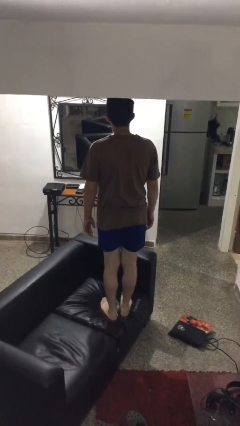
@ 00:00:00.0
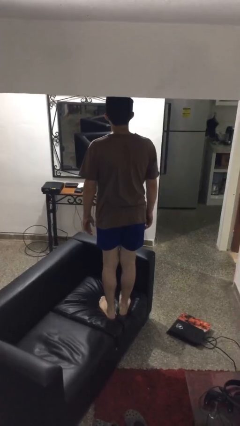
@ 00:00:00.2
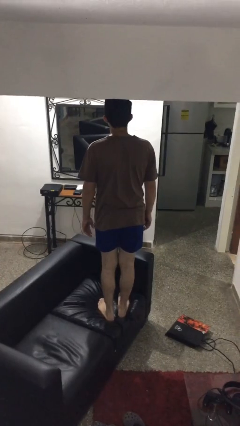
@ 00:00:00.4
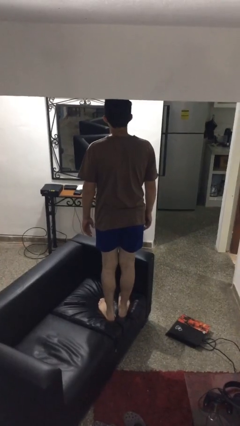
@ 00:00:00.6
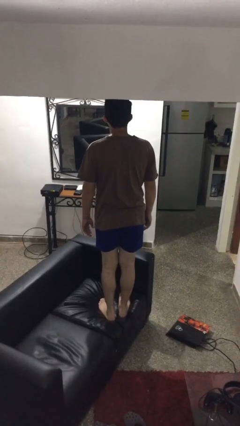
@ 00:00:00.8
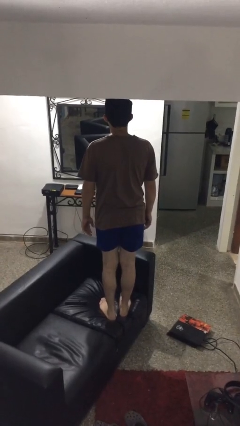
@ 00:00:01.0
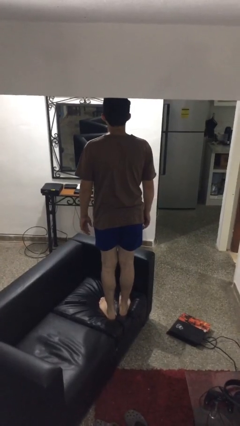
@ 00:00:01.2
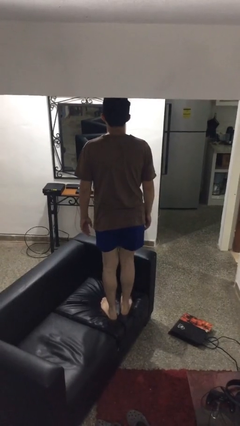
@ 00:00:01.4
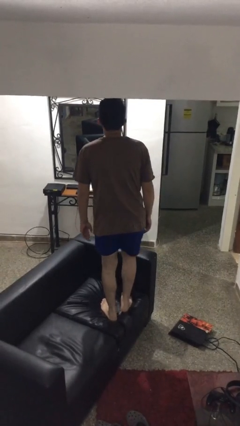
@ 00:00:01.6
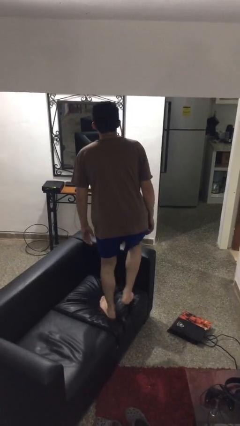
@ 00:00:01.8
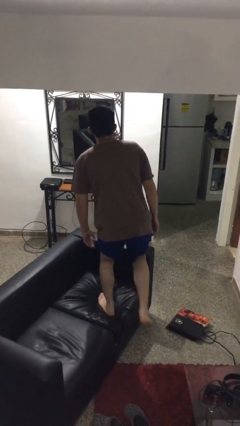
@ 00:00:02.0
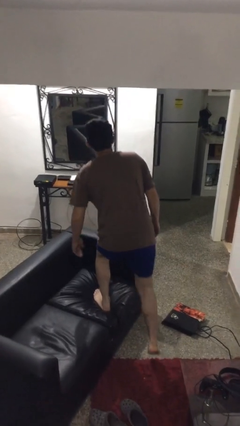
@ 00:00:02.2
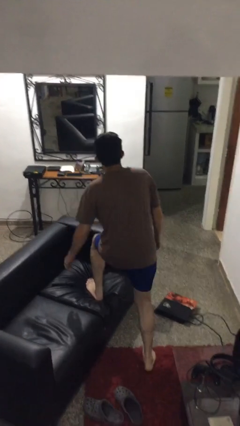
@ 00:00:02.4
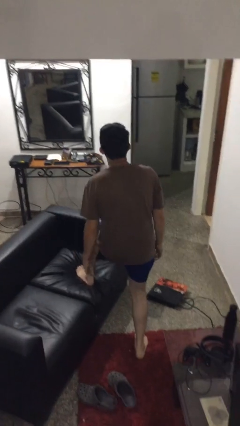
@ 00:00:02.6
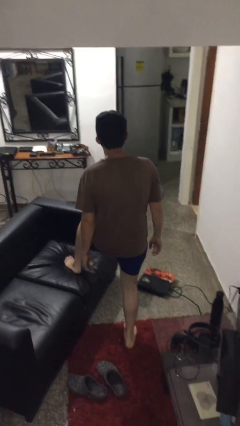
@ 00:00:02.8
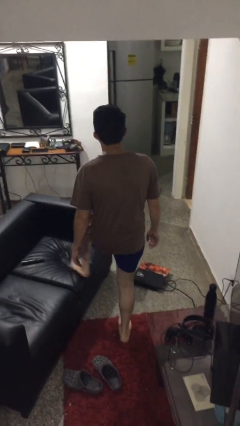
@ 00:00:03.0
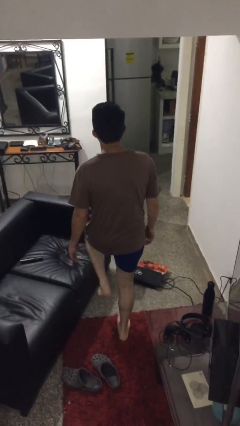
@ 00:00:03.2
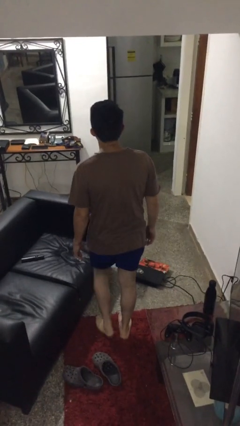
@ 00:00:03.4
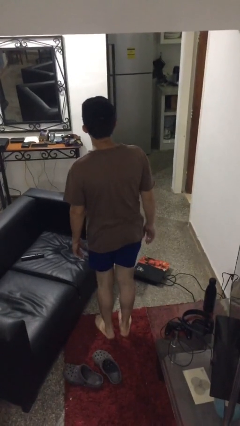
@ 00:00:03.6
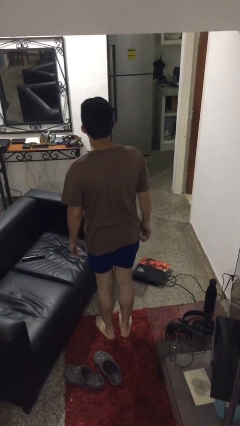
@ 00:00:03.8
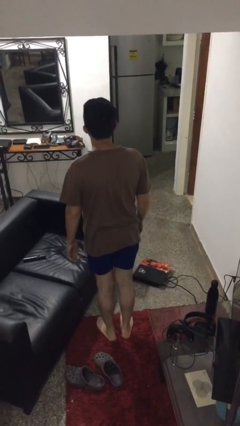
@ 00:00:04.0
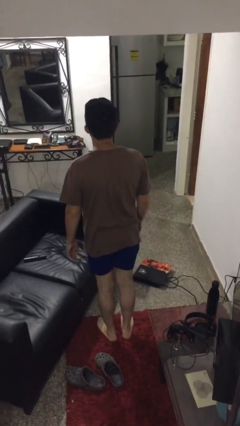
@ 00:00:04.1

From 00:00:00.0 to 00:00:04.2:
person climbs off couch

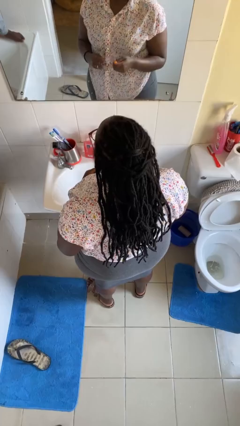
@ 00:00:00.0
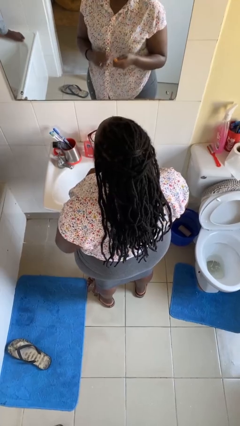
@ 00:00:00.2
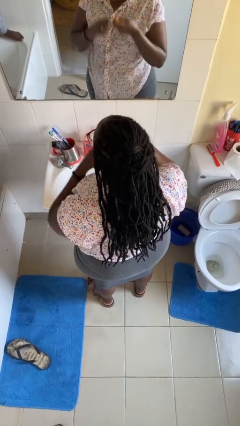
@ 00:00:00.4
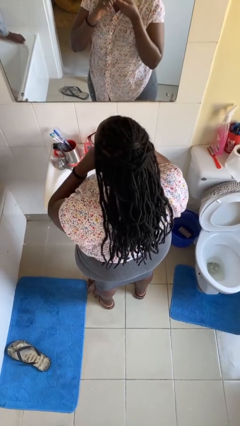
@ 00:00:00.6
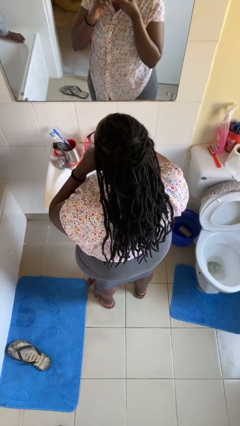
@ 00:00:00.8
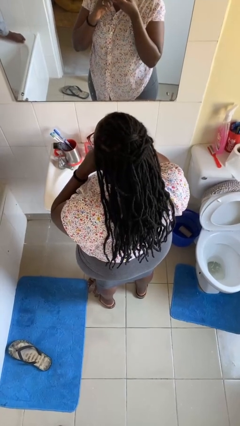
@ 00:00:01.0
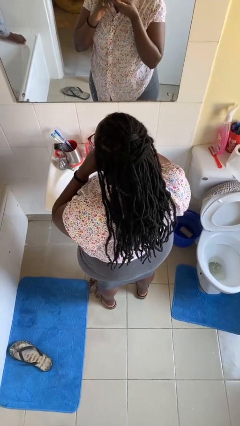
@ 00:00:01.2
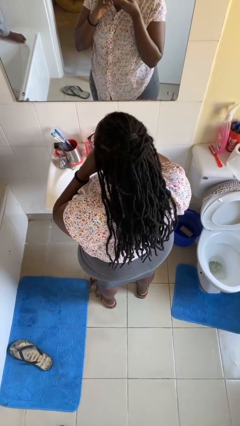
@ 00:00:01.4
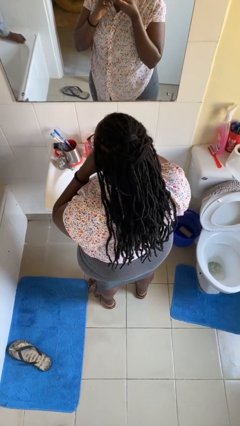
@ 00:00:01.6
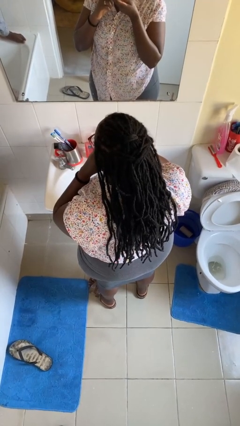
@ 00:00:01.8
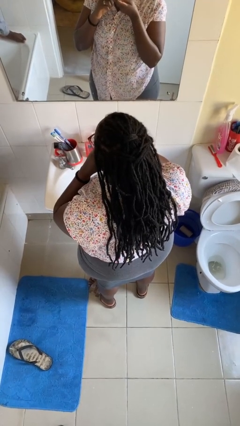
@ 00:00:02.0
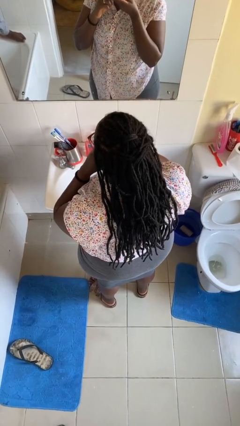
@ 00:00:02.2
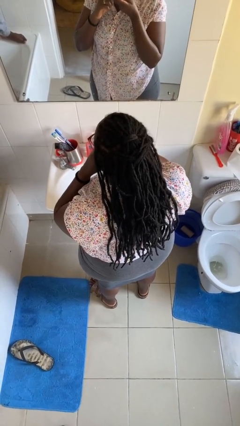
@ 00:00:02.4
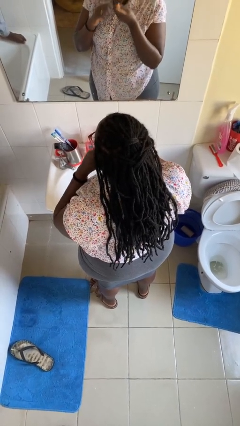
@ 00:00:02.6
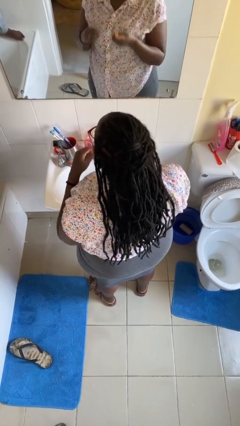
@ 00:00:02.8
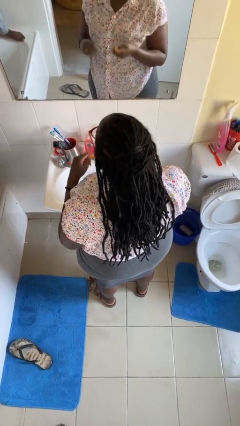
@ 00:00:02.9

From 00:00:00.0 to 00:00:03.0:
person flosses

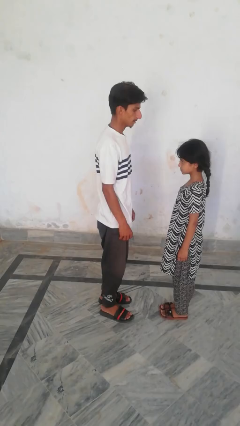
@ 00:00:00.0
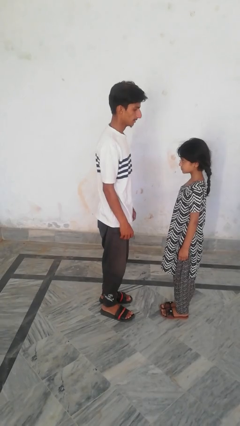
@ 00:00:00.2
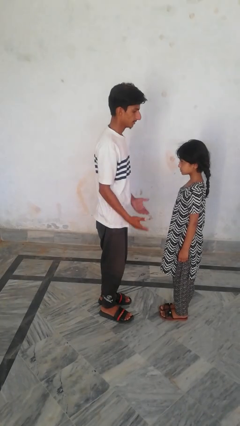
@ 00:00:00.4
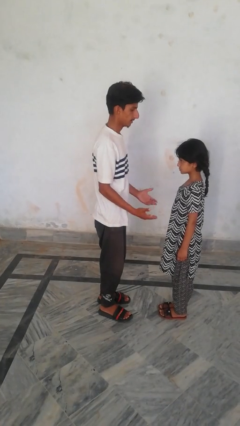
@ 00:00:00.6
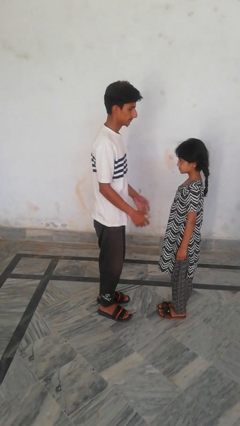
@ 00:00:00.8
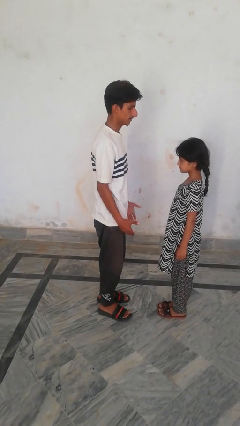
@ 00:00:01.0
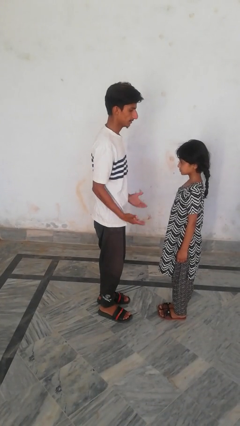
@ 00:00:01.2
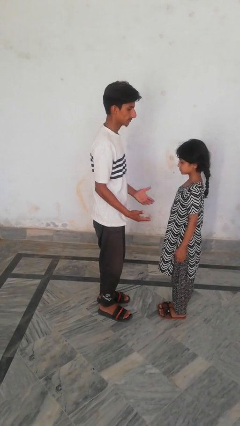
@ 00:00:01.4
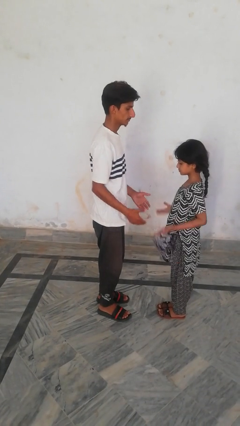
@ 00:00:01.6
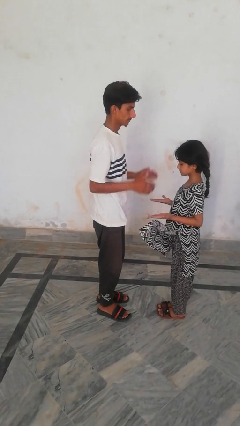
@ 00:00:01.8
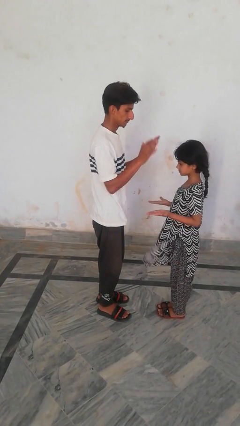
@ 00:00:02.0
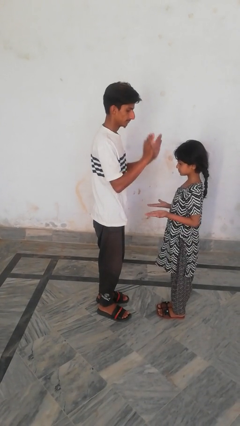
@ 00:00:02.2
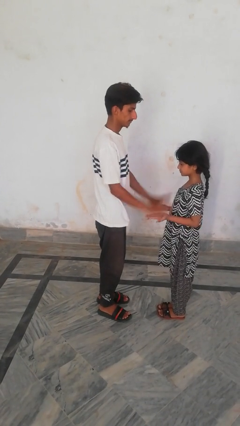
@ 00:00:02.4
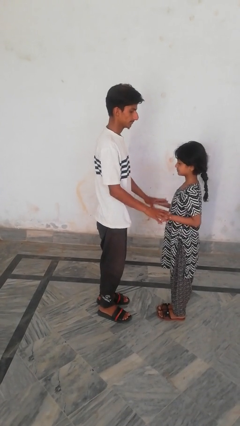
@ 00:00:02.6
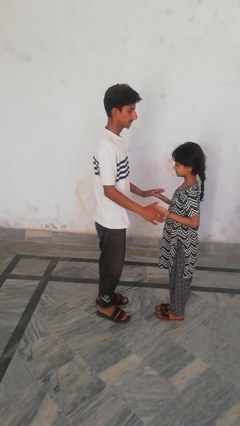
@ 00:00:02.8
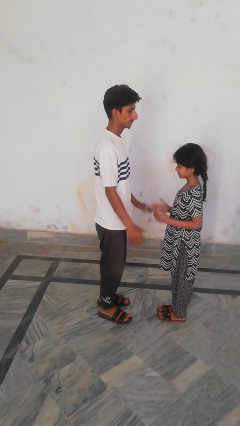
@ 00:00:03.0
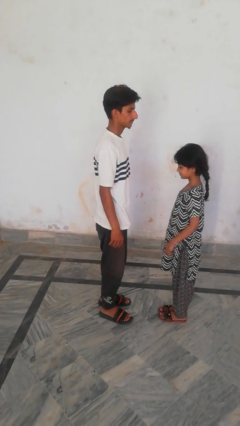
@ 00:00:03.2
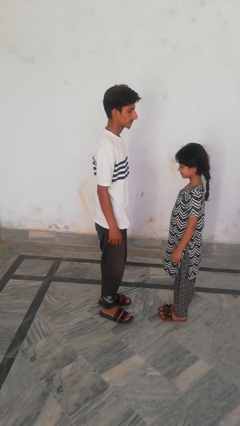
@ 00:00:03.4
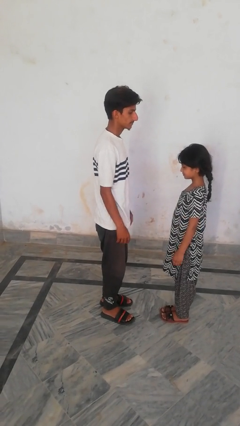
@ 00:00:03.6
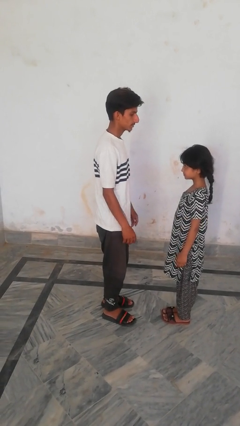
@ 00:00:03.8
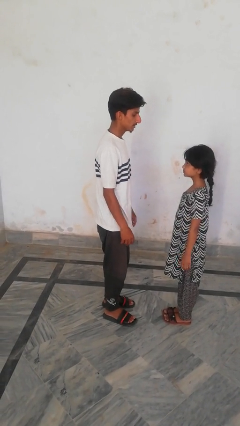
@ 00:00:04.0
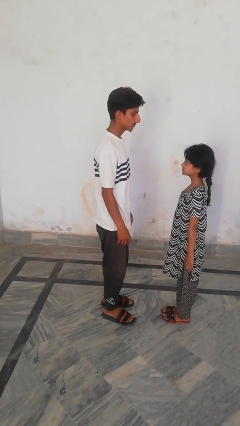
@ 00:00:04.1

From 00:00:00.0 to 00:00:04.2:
person highfives hand

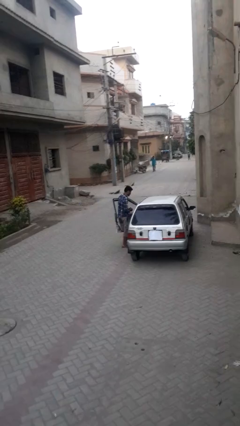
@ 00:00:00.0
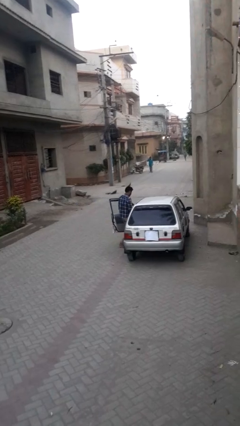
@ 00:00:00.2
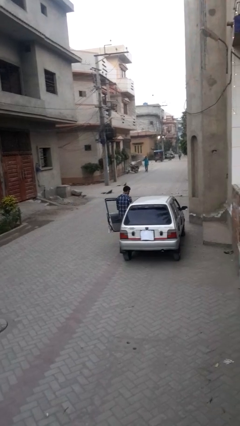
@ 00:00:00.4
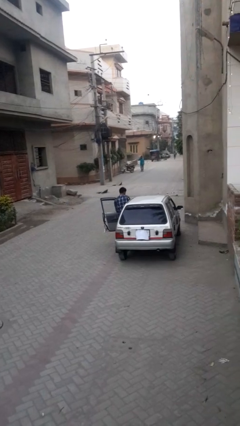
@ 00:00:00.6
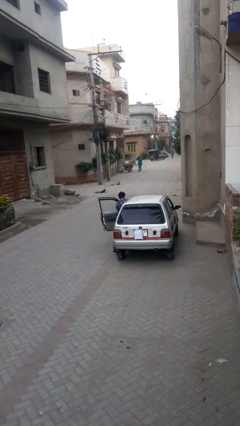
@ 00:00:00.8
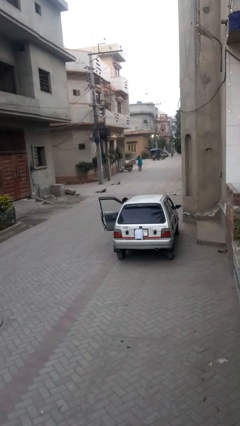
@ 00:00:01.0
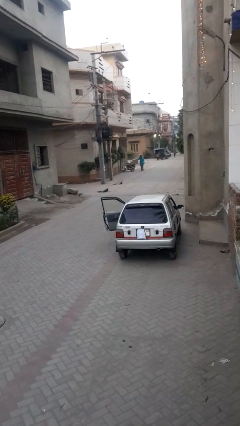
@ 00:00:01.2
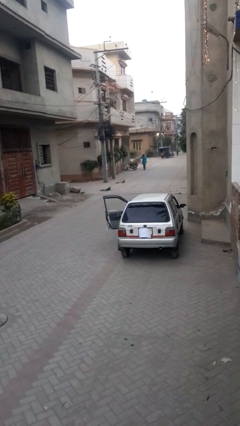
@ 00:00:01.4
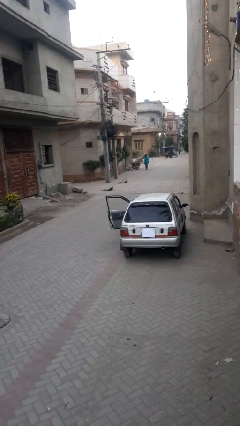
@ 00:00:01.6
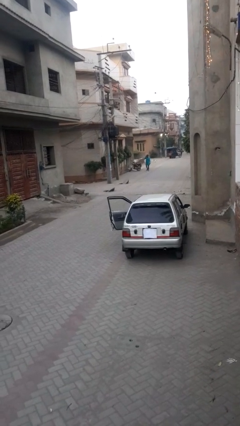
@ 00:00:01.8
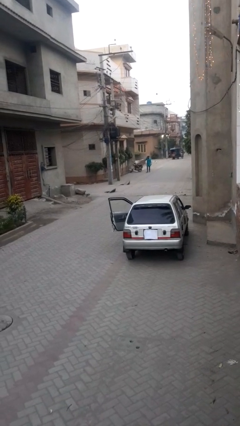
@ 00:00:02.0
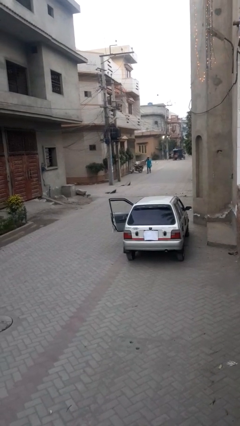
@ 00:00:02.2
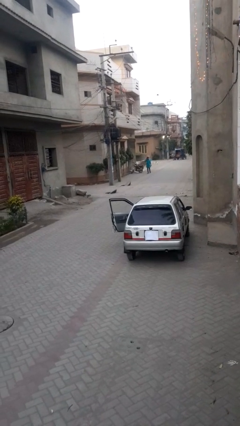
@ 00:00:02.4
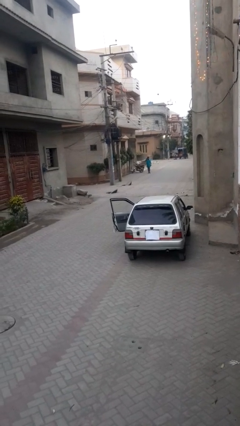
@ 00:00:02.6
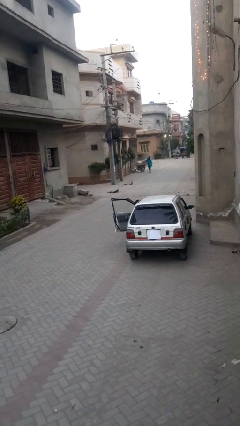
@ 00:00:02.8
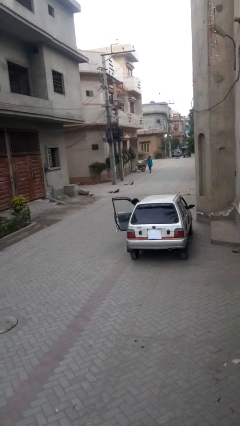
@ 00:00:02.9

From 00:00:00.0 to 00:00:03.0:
person enters car

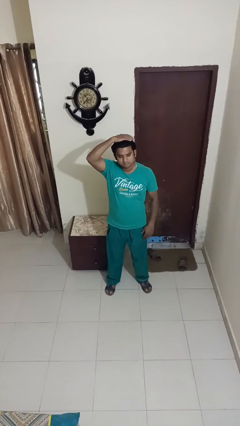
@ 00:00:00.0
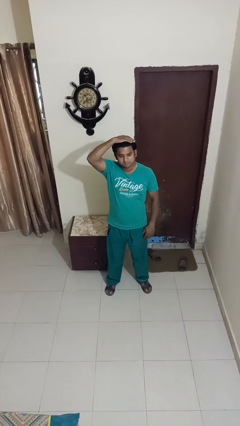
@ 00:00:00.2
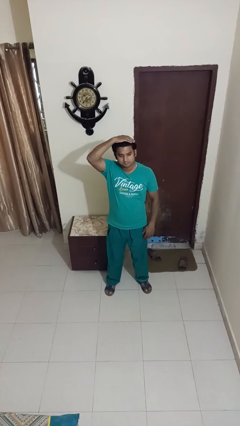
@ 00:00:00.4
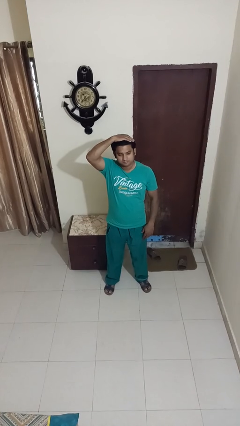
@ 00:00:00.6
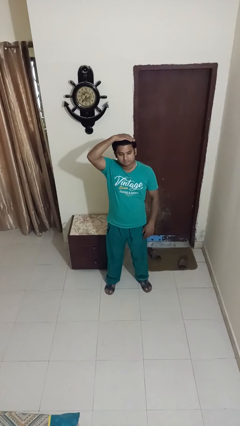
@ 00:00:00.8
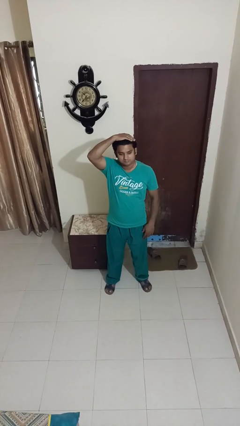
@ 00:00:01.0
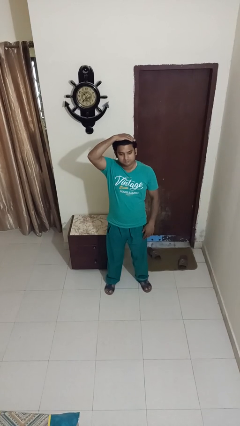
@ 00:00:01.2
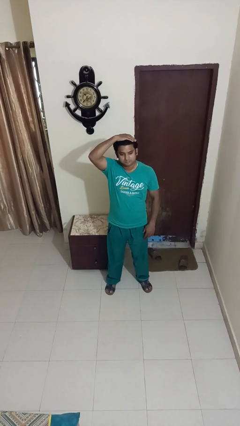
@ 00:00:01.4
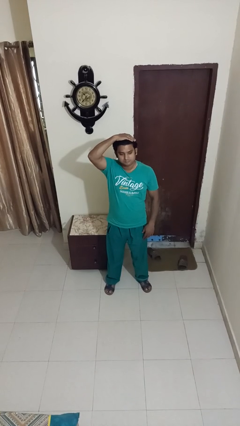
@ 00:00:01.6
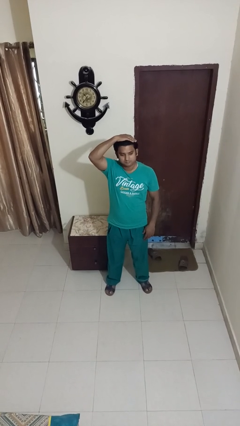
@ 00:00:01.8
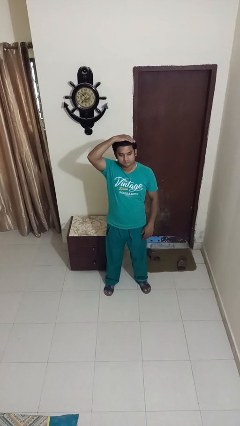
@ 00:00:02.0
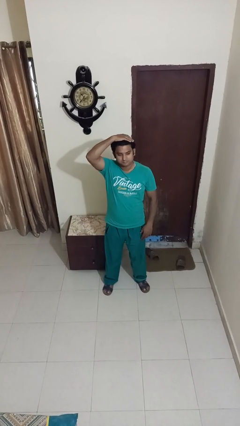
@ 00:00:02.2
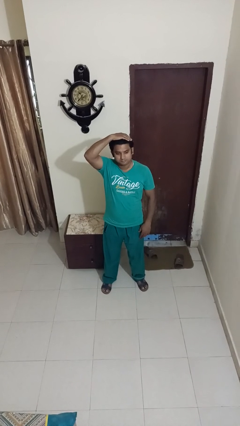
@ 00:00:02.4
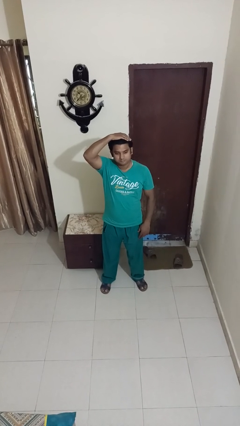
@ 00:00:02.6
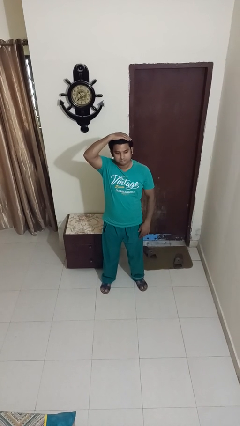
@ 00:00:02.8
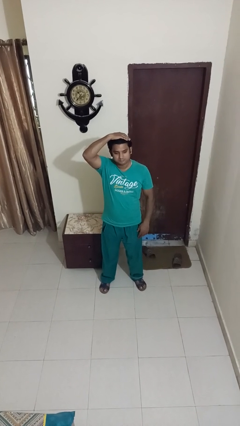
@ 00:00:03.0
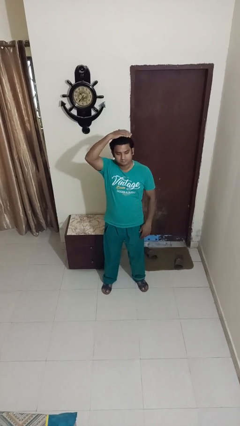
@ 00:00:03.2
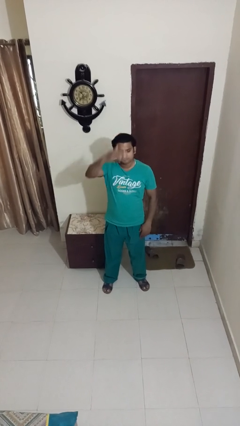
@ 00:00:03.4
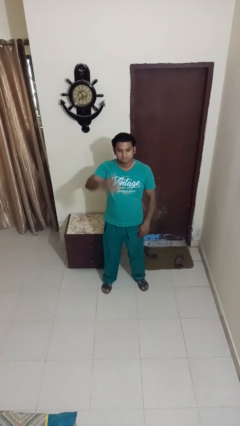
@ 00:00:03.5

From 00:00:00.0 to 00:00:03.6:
person pats head
